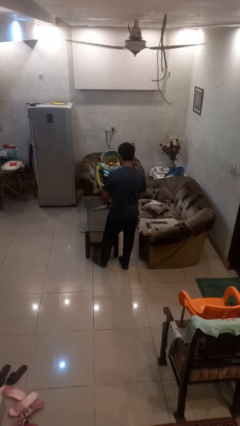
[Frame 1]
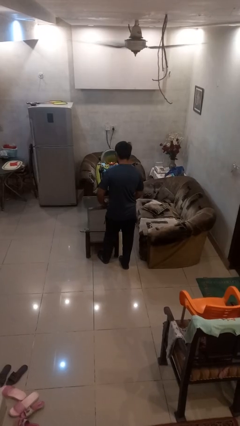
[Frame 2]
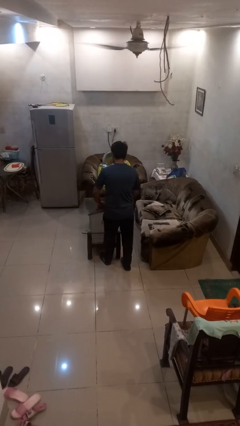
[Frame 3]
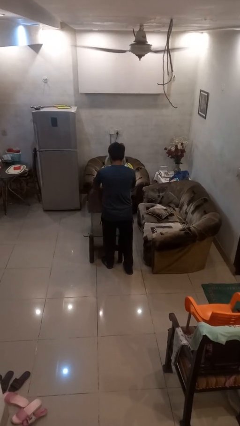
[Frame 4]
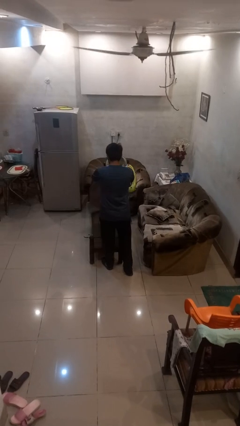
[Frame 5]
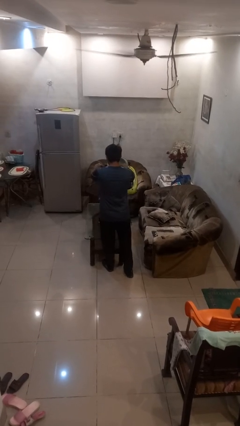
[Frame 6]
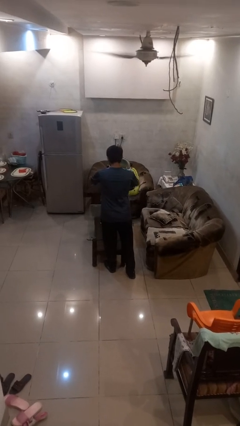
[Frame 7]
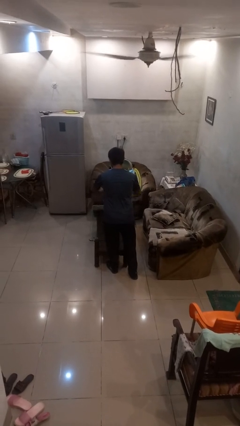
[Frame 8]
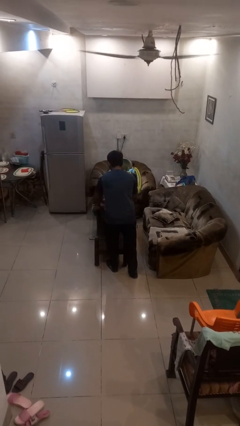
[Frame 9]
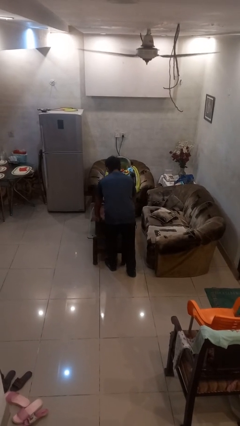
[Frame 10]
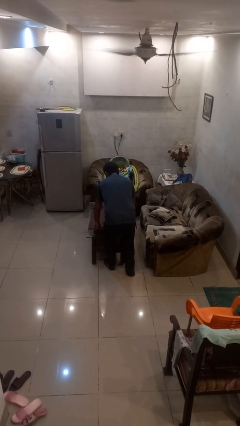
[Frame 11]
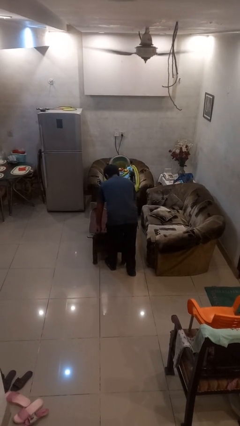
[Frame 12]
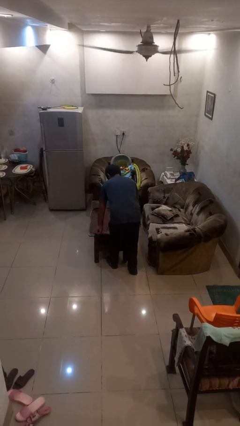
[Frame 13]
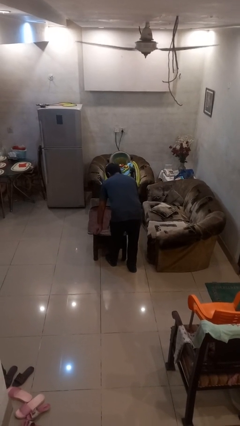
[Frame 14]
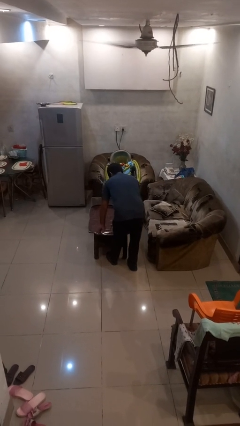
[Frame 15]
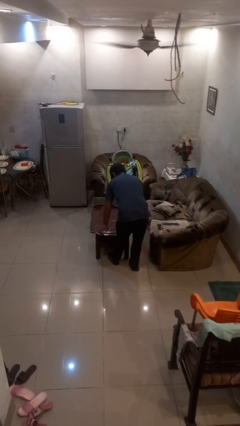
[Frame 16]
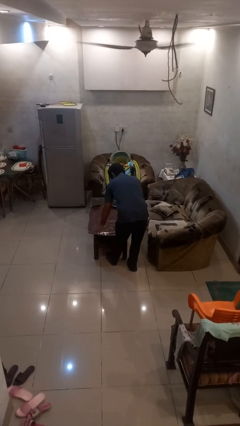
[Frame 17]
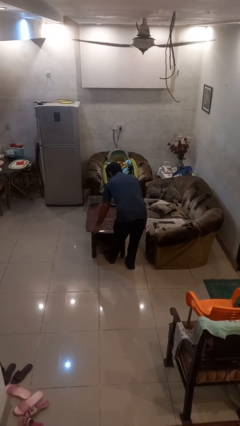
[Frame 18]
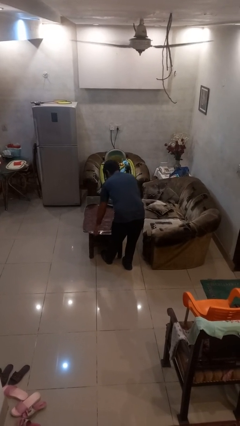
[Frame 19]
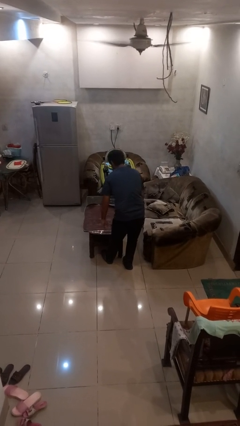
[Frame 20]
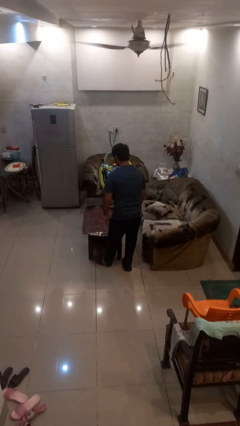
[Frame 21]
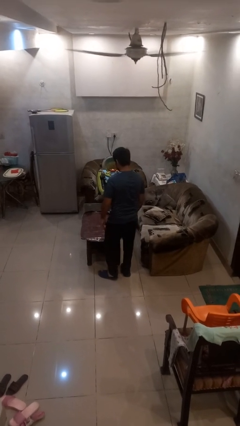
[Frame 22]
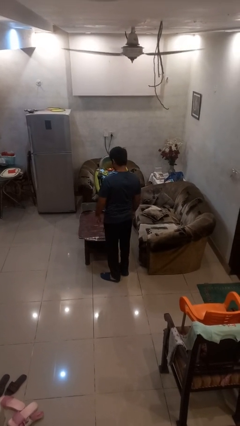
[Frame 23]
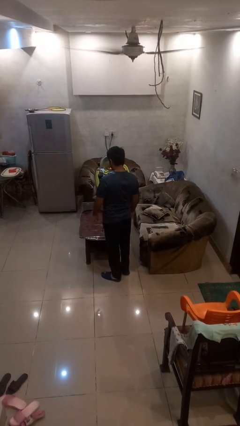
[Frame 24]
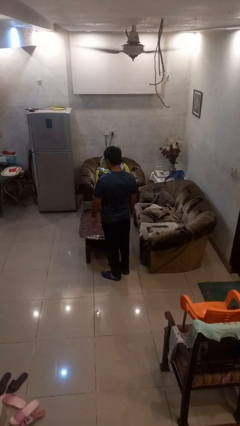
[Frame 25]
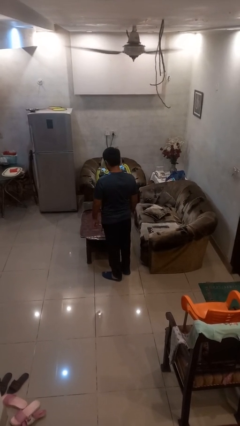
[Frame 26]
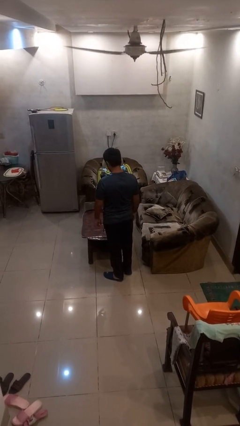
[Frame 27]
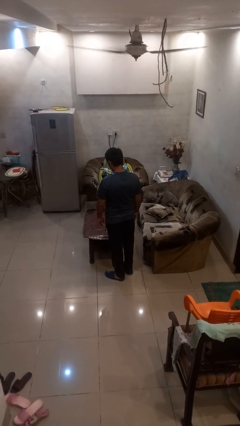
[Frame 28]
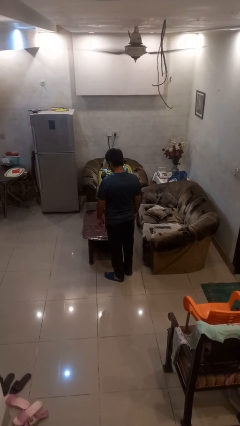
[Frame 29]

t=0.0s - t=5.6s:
person spreads tablecloth

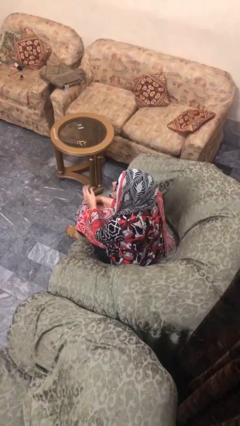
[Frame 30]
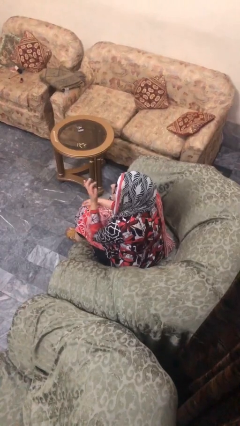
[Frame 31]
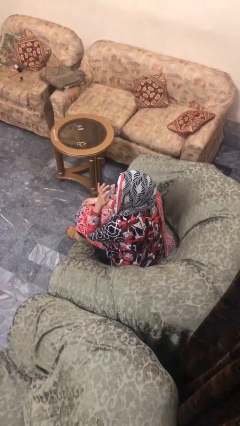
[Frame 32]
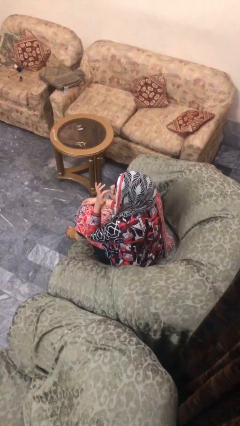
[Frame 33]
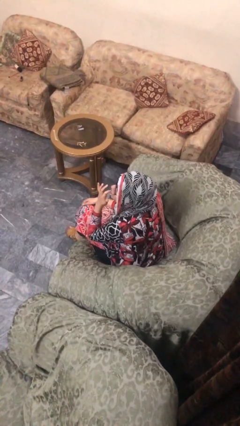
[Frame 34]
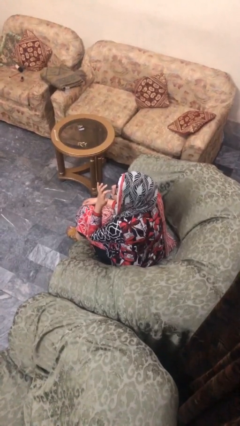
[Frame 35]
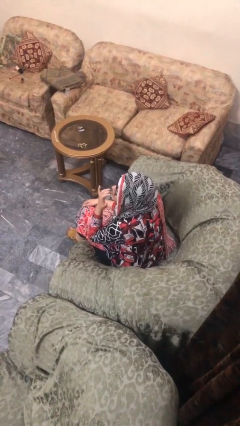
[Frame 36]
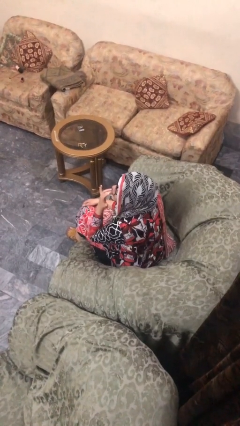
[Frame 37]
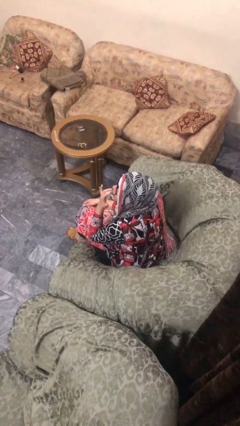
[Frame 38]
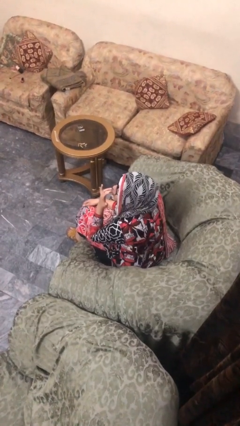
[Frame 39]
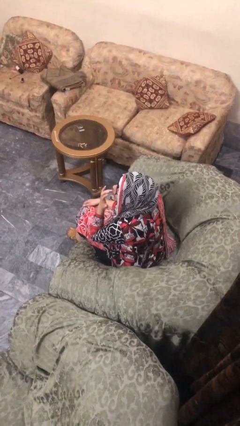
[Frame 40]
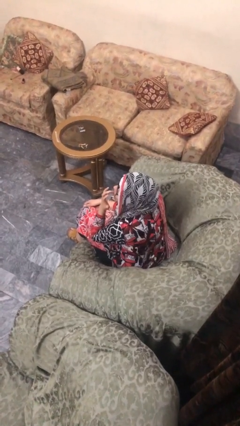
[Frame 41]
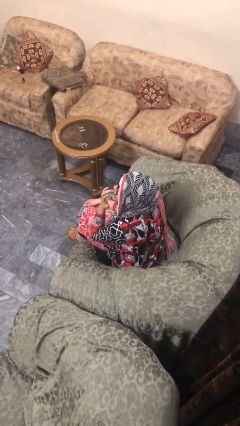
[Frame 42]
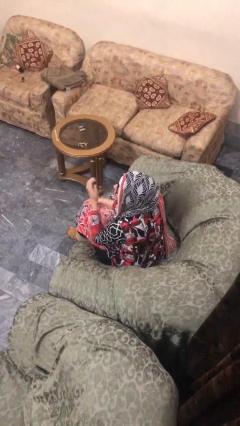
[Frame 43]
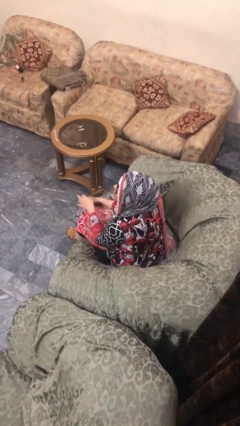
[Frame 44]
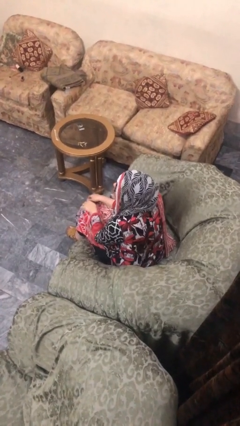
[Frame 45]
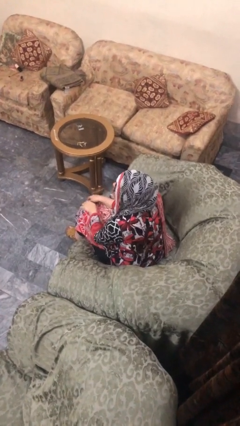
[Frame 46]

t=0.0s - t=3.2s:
person licks fingers

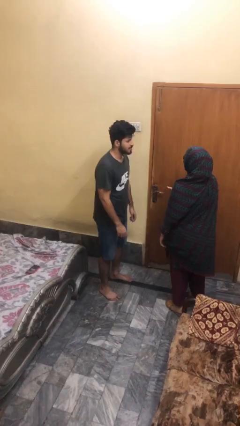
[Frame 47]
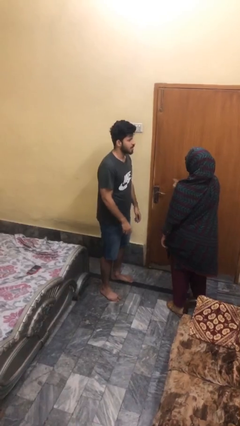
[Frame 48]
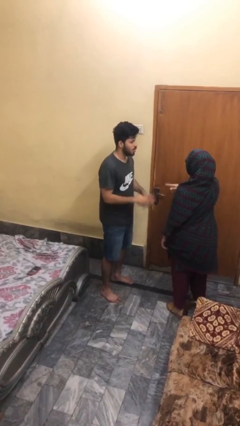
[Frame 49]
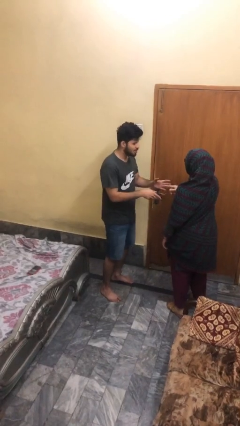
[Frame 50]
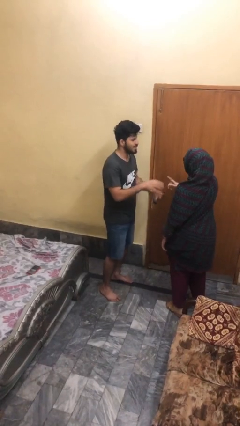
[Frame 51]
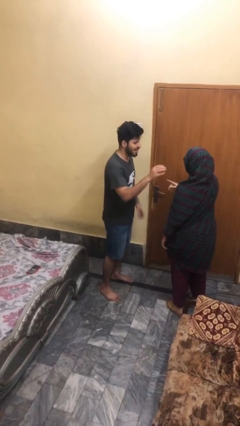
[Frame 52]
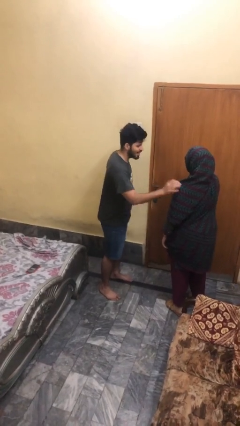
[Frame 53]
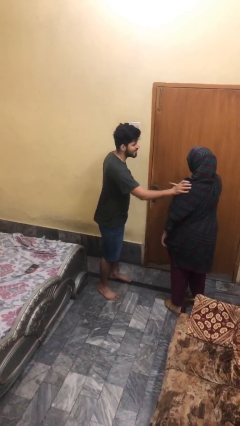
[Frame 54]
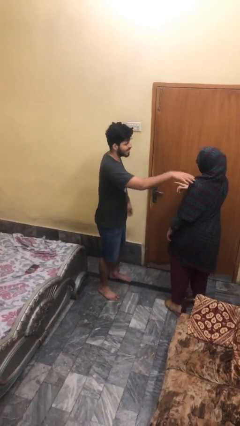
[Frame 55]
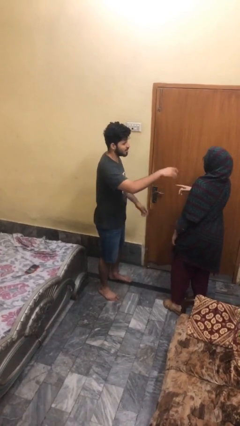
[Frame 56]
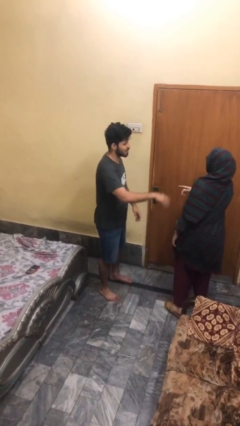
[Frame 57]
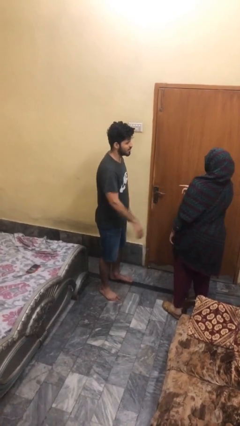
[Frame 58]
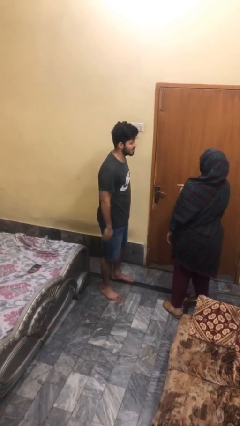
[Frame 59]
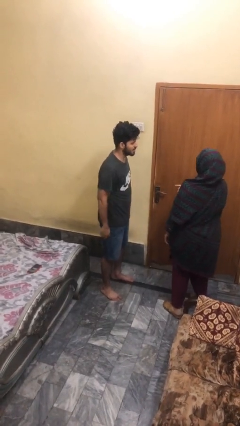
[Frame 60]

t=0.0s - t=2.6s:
person shoves person

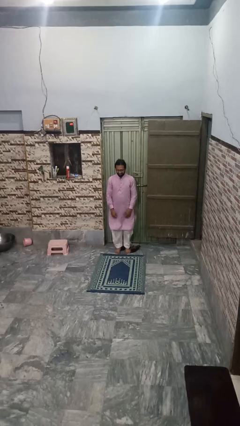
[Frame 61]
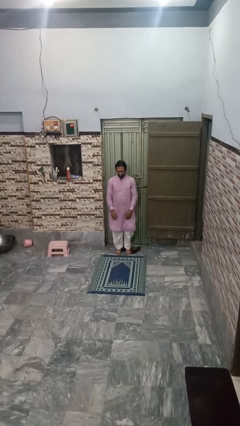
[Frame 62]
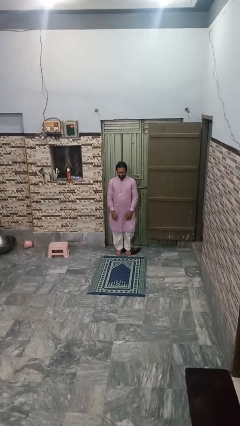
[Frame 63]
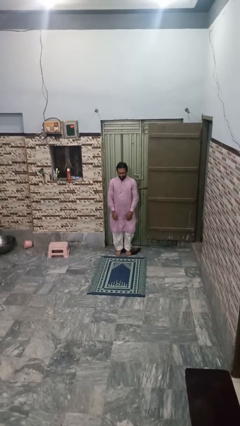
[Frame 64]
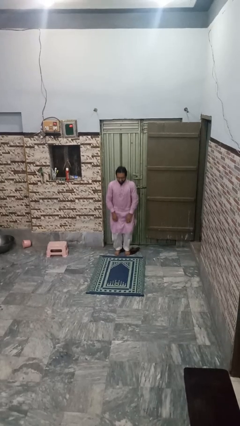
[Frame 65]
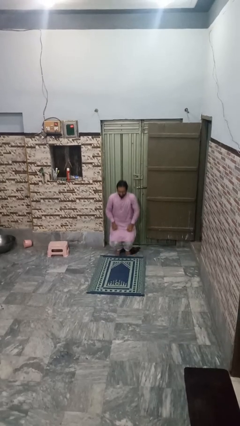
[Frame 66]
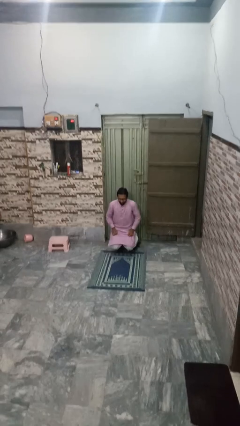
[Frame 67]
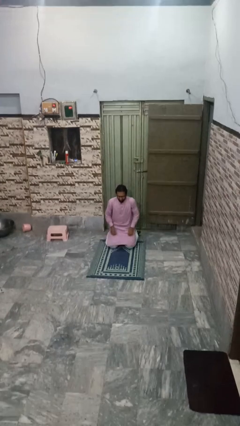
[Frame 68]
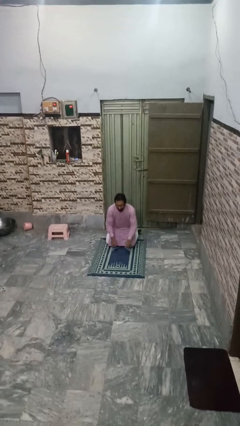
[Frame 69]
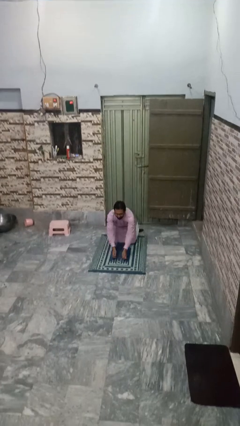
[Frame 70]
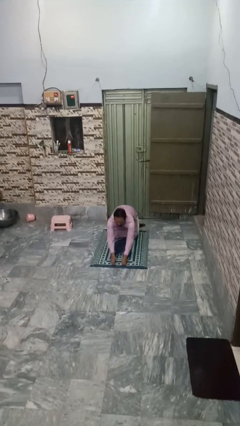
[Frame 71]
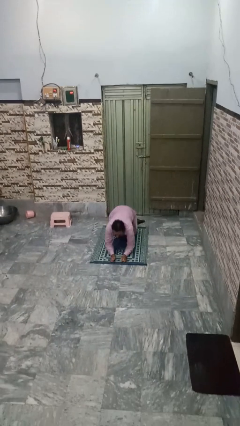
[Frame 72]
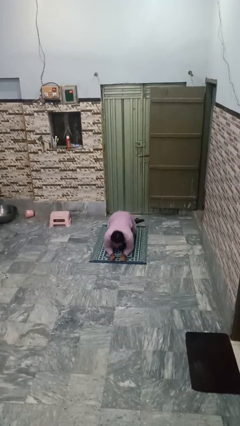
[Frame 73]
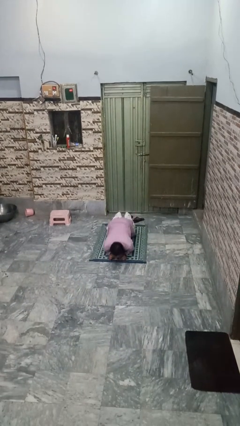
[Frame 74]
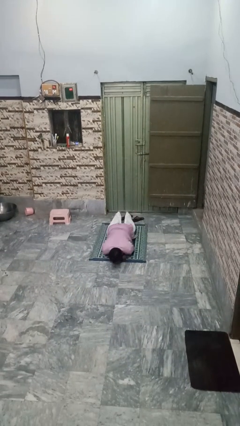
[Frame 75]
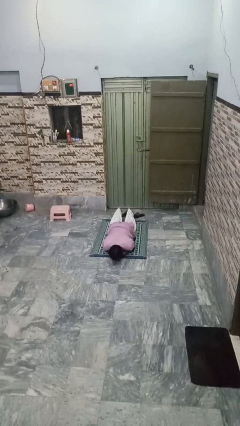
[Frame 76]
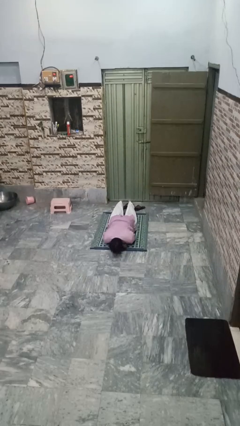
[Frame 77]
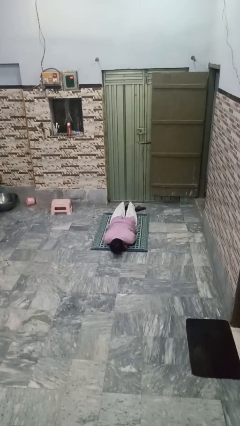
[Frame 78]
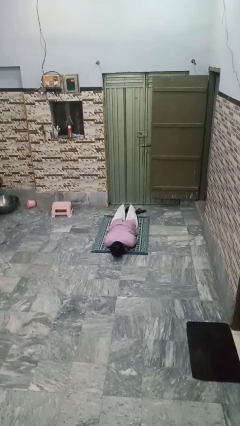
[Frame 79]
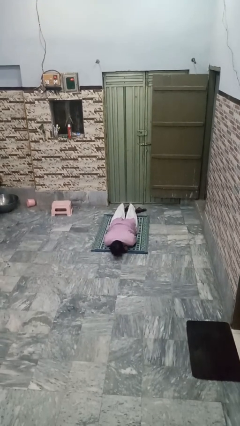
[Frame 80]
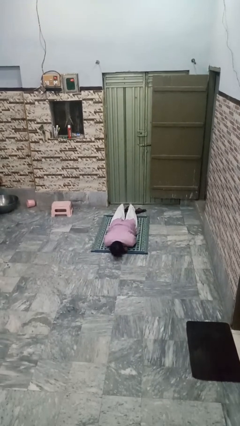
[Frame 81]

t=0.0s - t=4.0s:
person exercises with plank

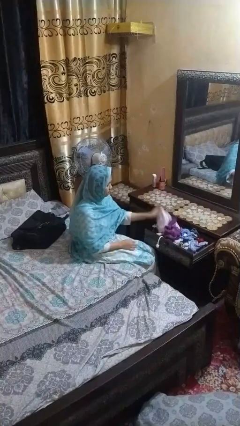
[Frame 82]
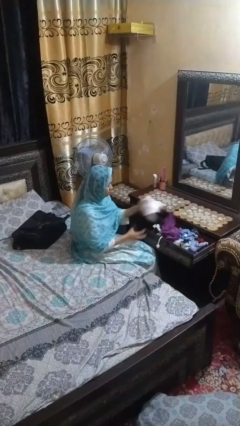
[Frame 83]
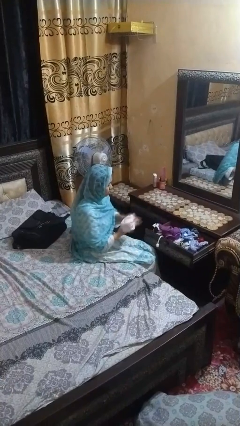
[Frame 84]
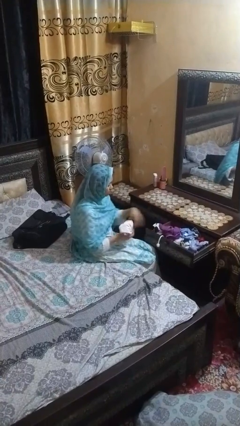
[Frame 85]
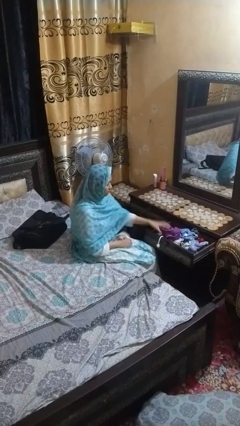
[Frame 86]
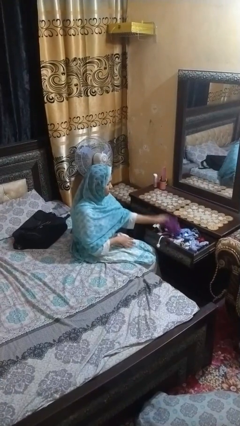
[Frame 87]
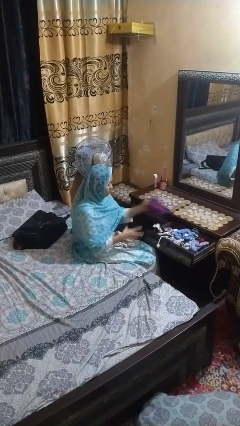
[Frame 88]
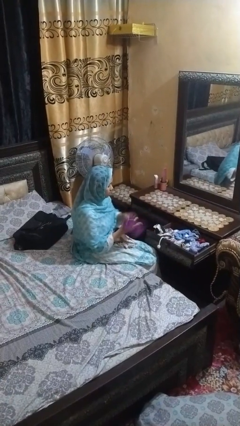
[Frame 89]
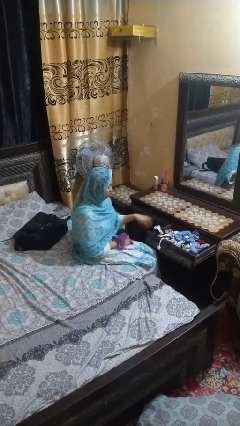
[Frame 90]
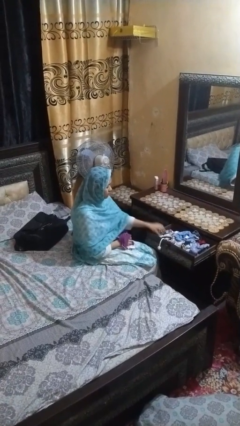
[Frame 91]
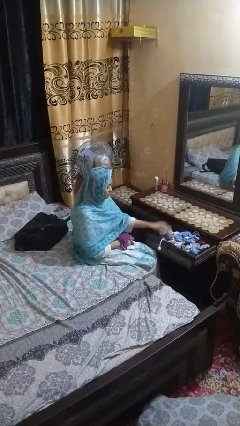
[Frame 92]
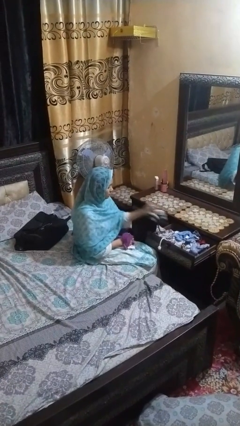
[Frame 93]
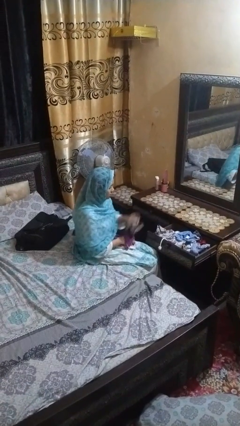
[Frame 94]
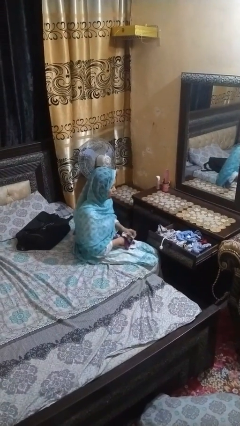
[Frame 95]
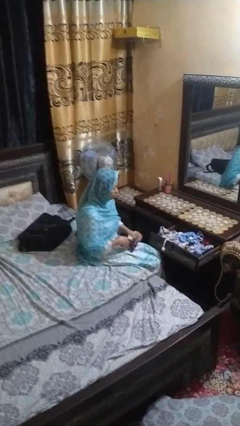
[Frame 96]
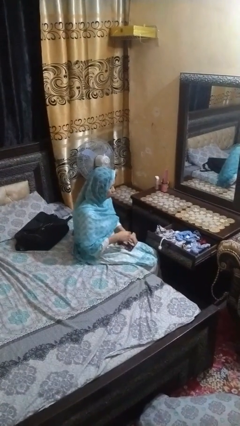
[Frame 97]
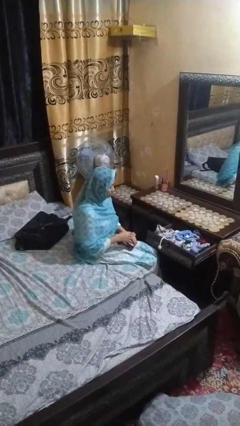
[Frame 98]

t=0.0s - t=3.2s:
person takes clothes from dresser
